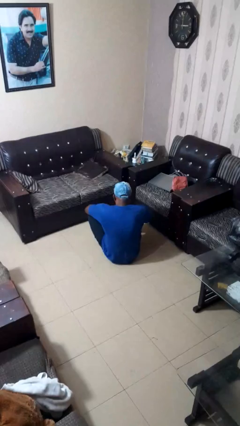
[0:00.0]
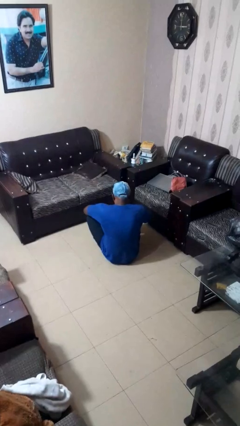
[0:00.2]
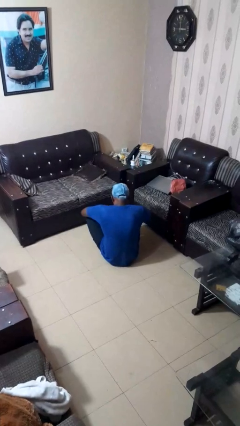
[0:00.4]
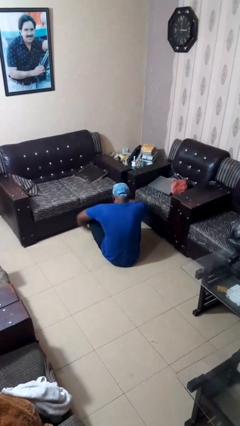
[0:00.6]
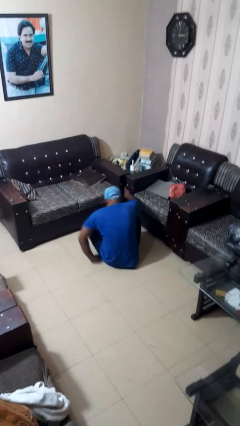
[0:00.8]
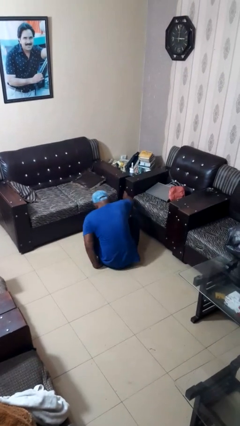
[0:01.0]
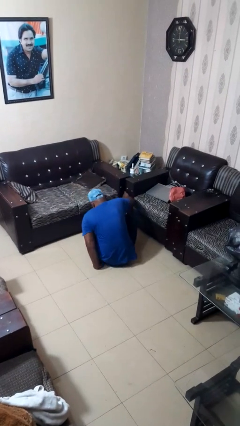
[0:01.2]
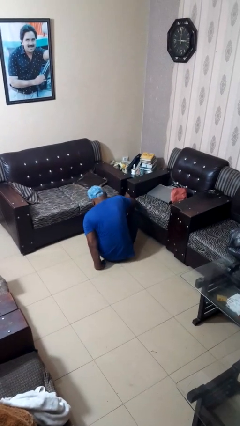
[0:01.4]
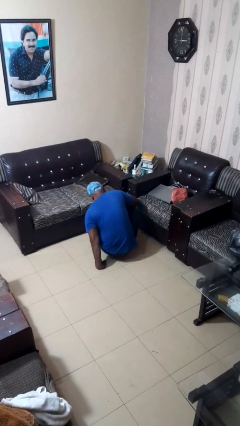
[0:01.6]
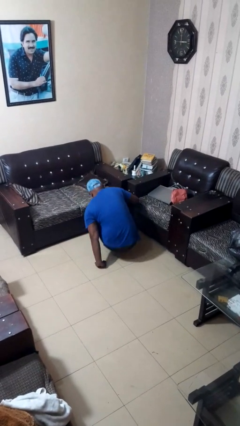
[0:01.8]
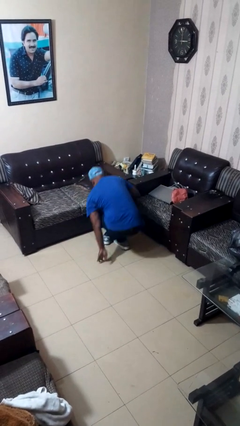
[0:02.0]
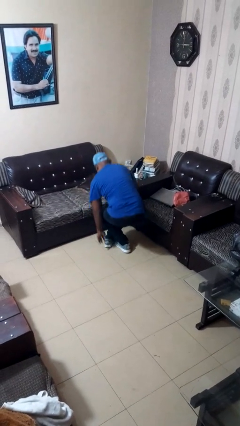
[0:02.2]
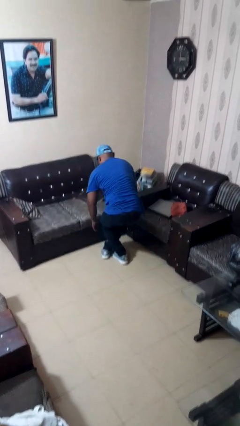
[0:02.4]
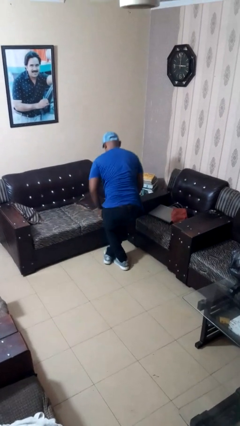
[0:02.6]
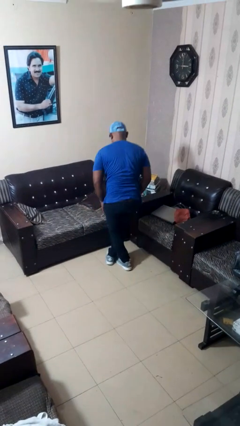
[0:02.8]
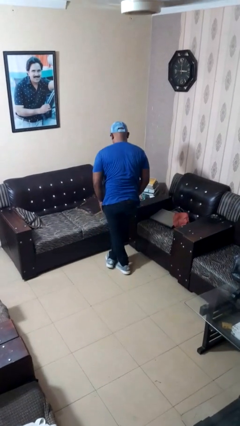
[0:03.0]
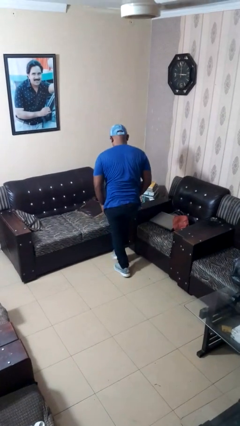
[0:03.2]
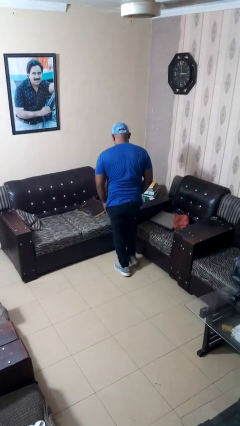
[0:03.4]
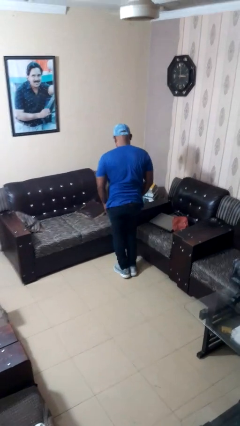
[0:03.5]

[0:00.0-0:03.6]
person stands up from floor

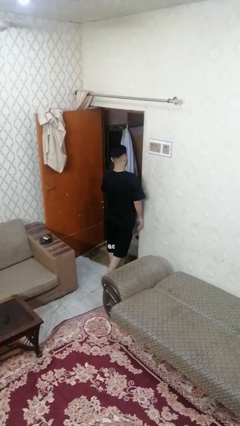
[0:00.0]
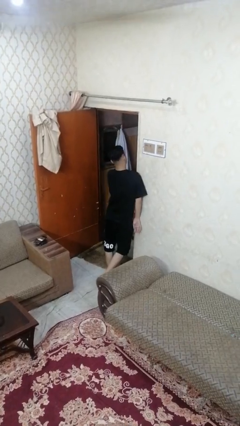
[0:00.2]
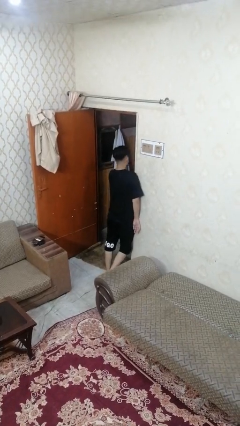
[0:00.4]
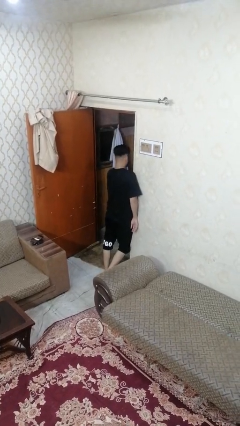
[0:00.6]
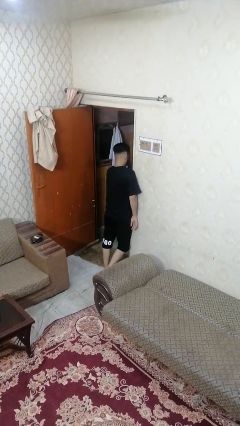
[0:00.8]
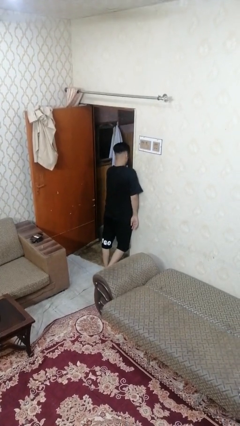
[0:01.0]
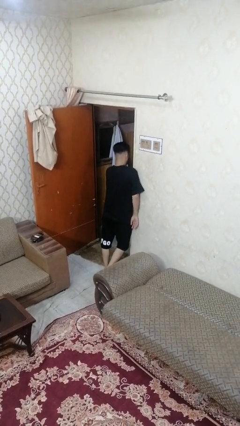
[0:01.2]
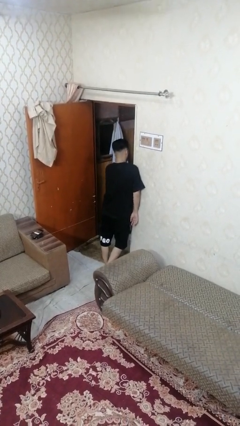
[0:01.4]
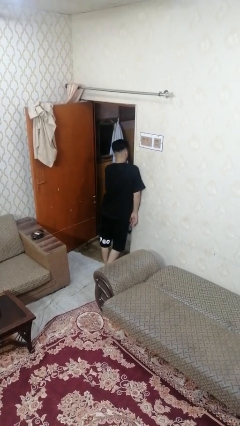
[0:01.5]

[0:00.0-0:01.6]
person bumps into wall

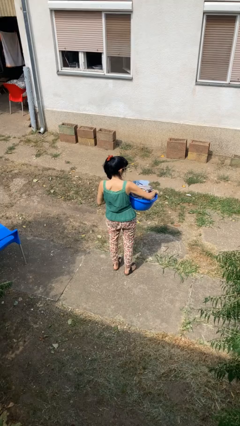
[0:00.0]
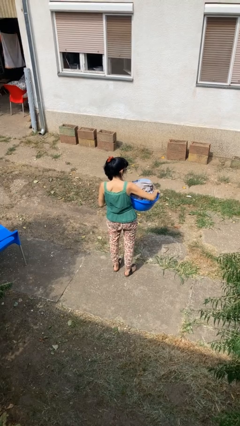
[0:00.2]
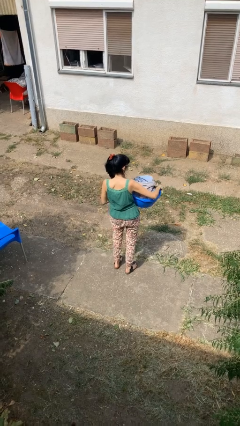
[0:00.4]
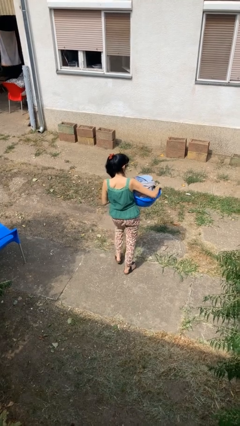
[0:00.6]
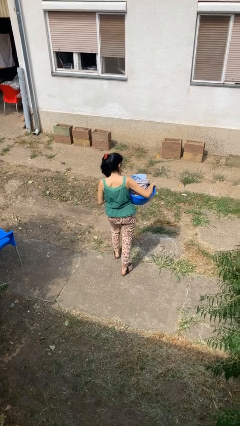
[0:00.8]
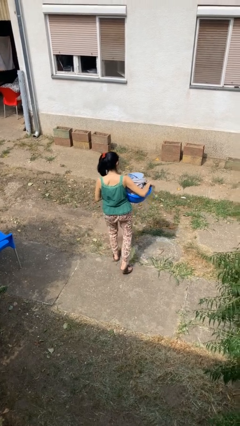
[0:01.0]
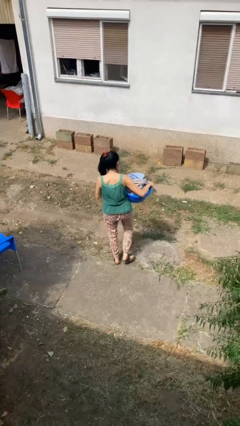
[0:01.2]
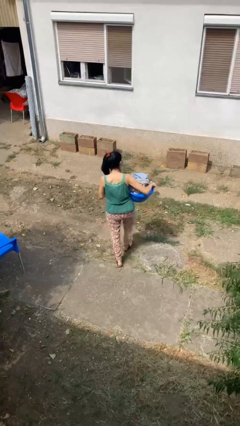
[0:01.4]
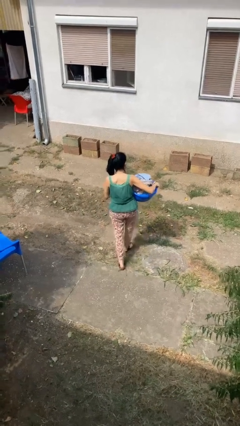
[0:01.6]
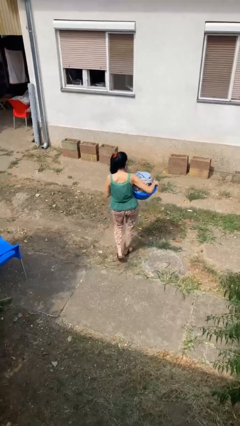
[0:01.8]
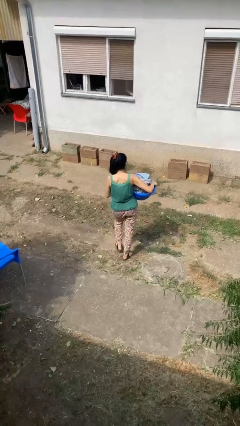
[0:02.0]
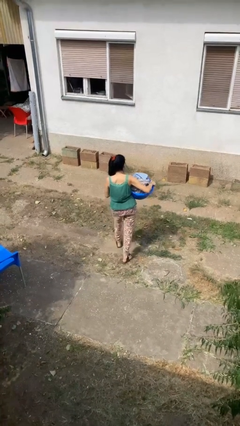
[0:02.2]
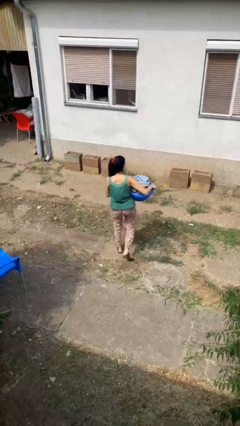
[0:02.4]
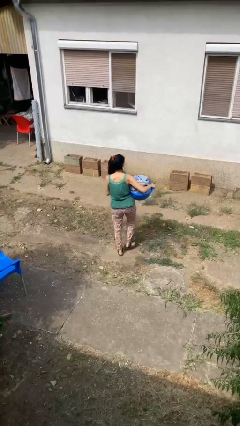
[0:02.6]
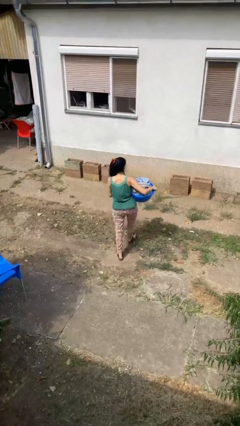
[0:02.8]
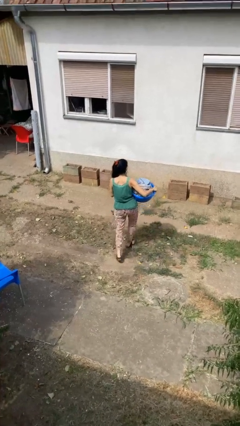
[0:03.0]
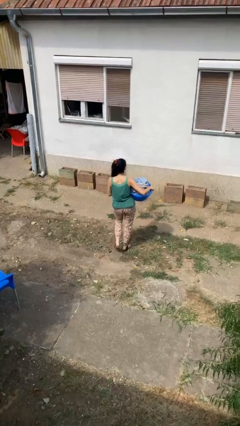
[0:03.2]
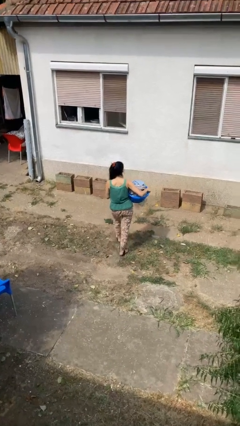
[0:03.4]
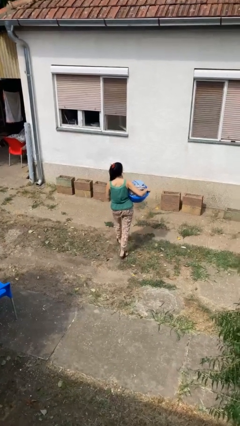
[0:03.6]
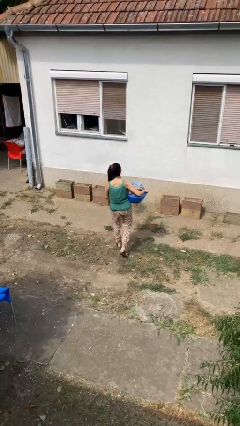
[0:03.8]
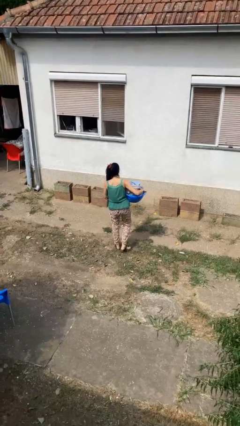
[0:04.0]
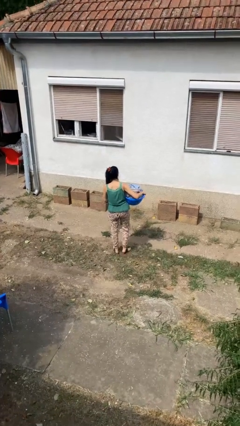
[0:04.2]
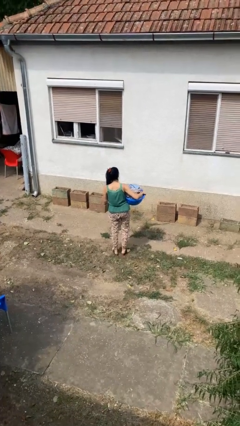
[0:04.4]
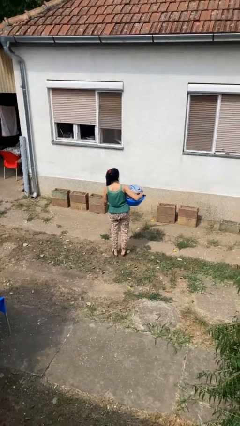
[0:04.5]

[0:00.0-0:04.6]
person carries laundry basket

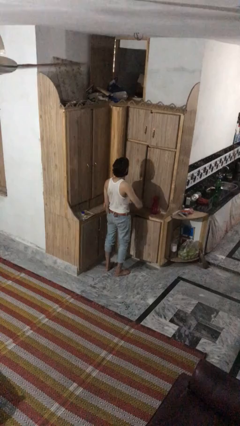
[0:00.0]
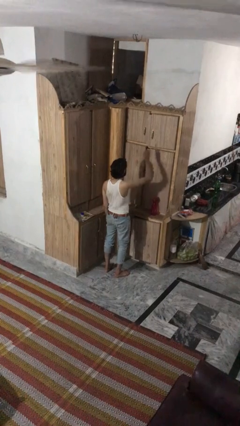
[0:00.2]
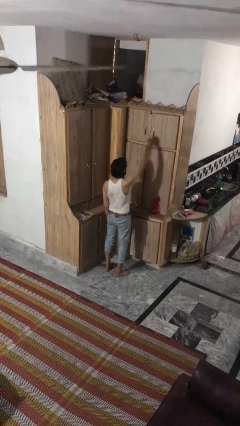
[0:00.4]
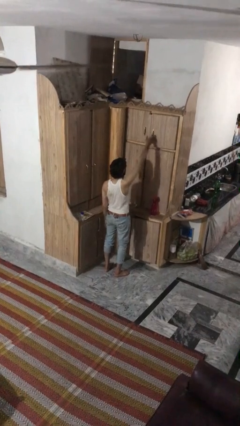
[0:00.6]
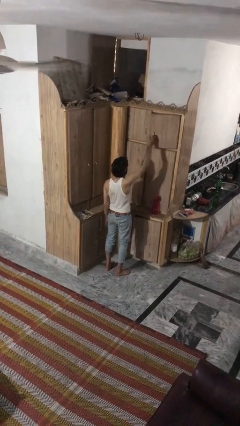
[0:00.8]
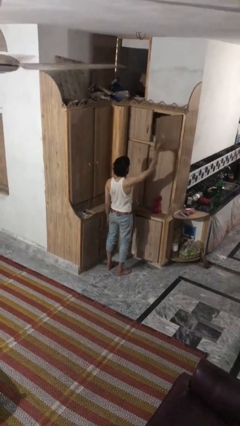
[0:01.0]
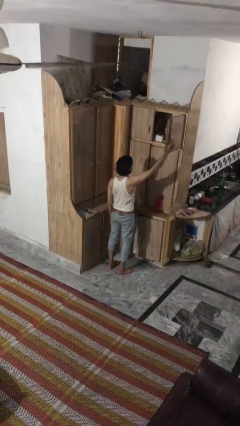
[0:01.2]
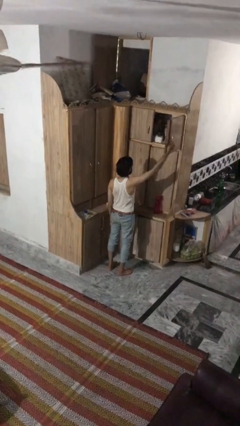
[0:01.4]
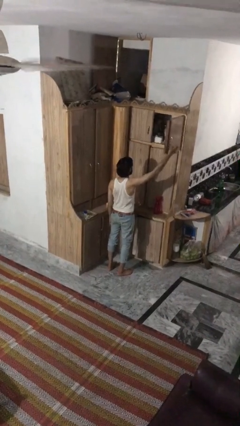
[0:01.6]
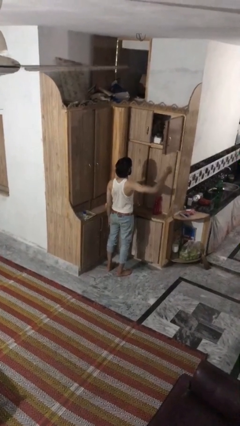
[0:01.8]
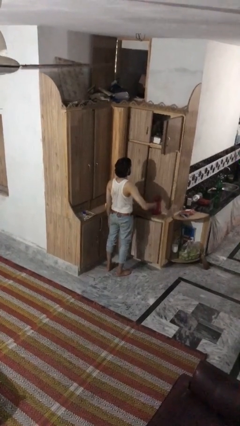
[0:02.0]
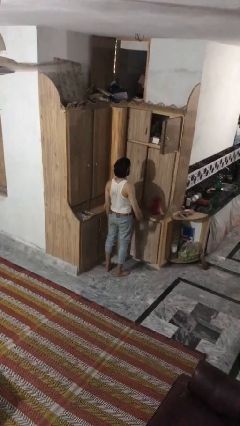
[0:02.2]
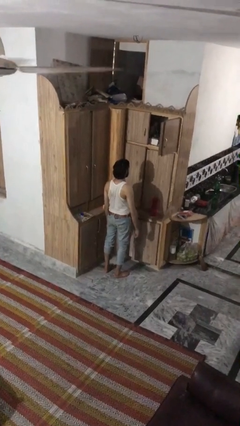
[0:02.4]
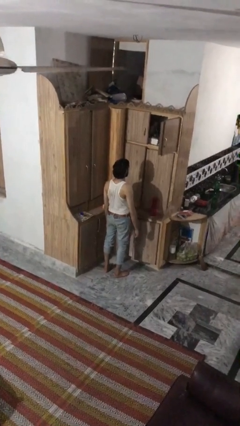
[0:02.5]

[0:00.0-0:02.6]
person opens cabinet

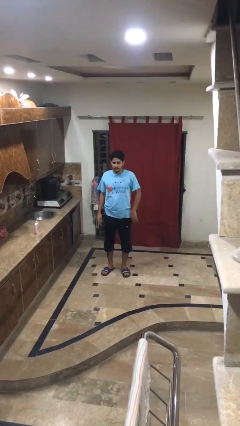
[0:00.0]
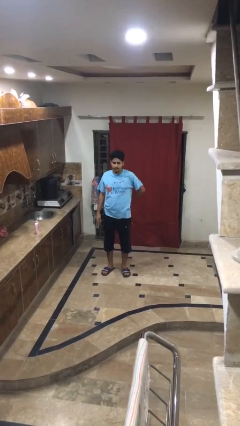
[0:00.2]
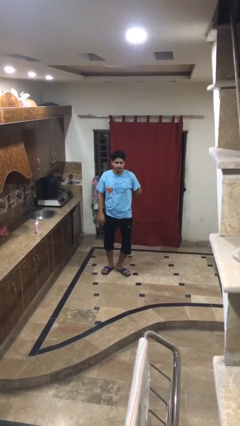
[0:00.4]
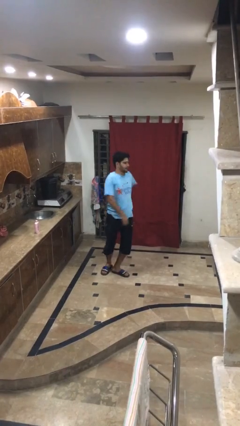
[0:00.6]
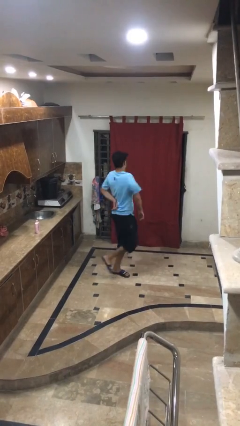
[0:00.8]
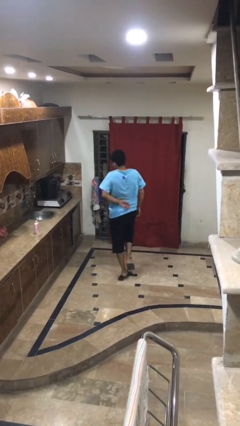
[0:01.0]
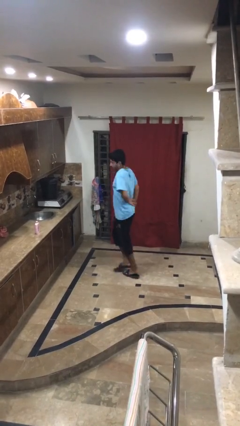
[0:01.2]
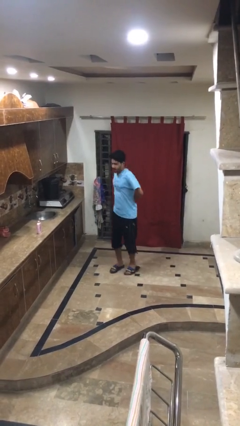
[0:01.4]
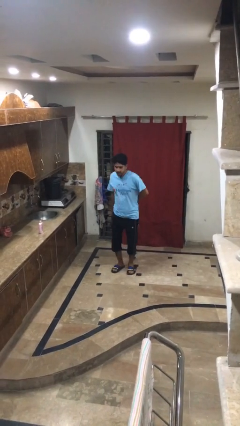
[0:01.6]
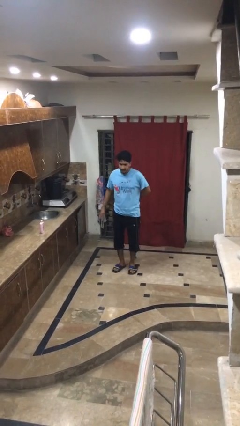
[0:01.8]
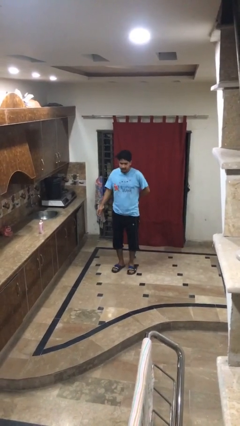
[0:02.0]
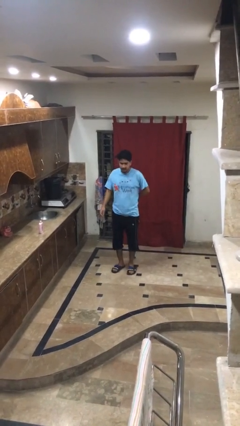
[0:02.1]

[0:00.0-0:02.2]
person twirls

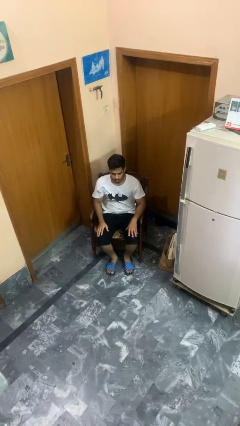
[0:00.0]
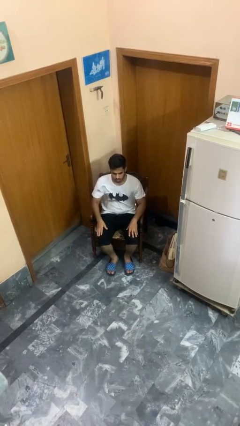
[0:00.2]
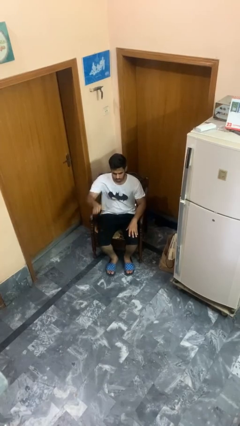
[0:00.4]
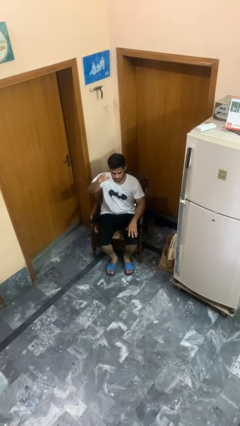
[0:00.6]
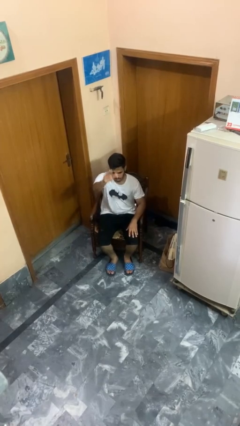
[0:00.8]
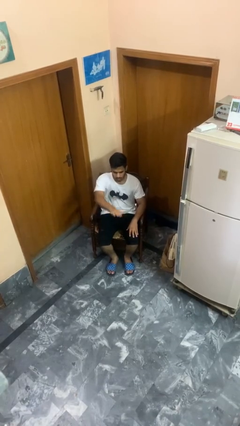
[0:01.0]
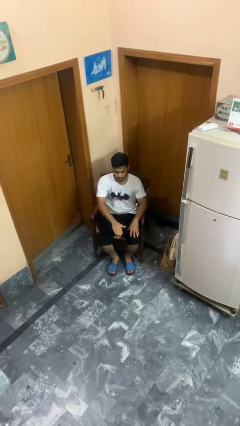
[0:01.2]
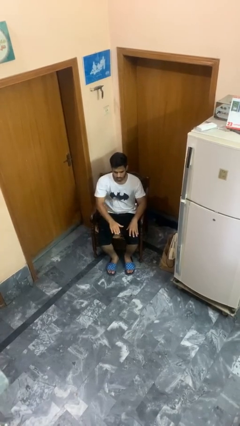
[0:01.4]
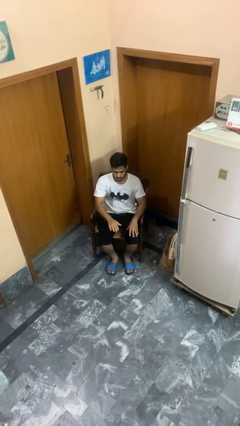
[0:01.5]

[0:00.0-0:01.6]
person gestures swipe down

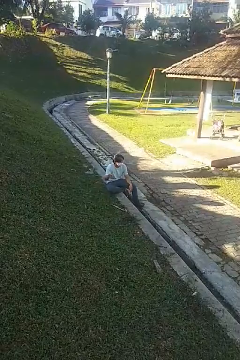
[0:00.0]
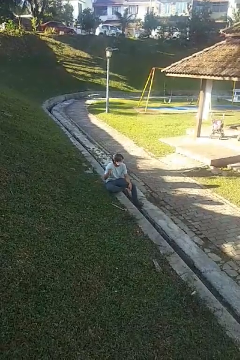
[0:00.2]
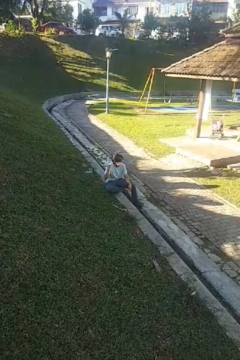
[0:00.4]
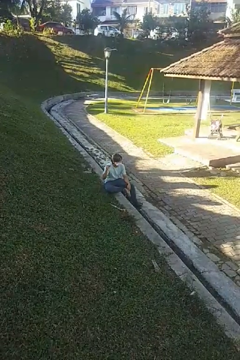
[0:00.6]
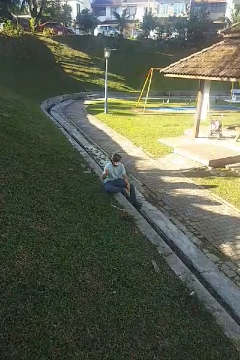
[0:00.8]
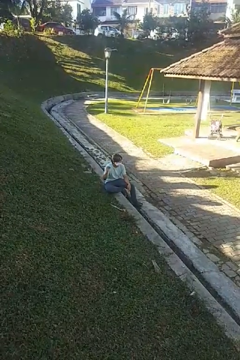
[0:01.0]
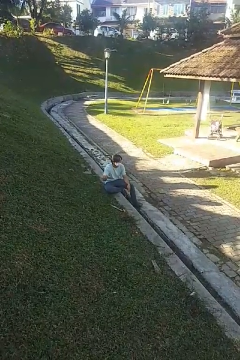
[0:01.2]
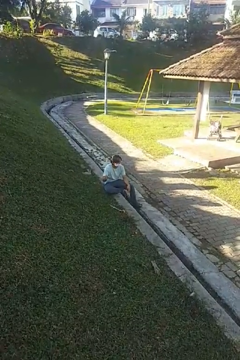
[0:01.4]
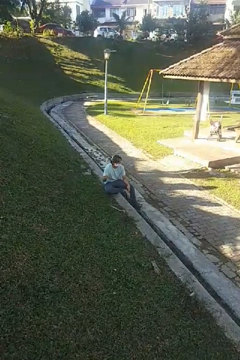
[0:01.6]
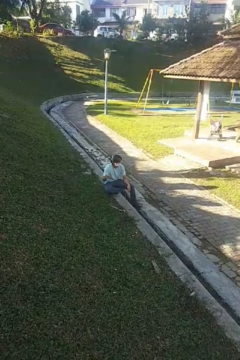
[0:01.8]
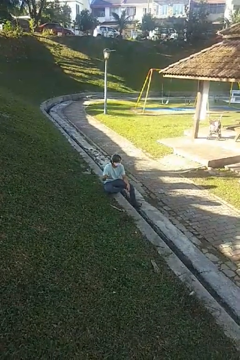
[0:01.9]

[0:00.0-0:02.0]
person snaps fingers
